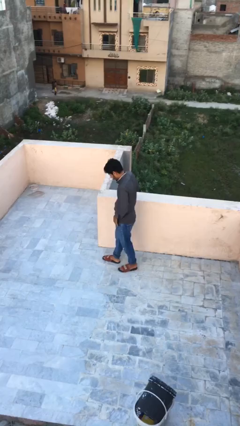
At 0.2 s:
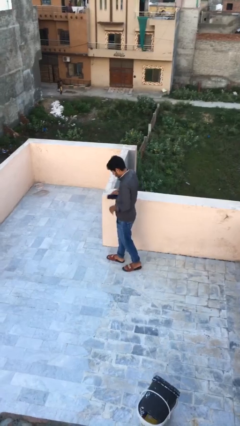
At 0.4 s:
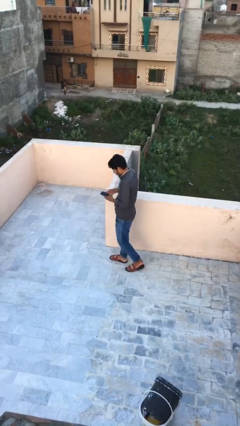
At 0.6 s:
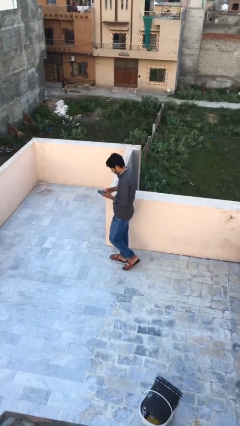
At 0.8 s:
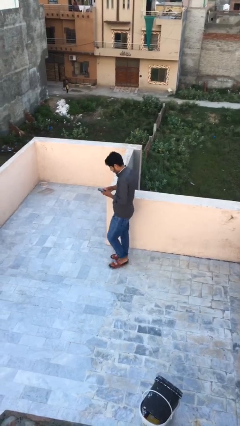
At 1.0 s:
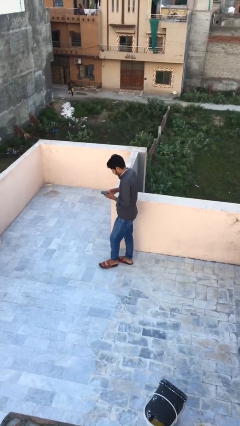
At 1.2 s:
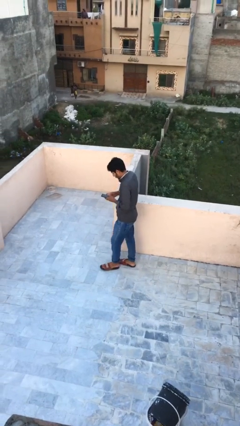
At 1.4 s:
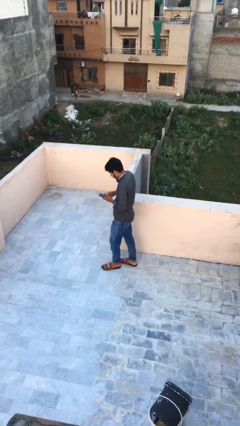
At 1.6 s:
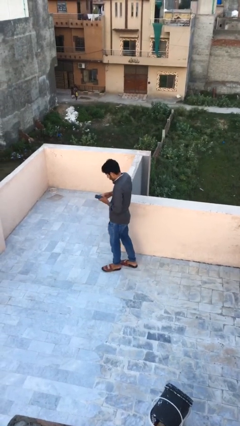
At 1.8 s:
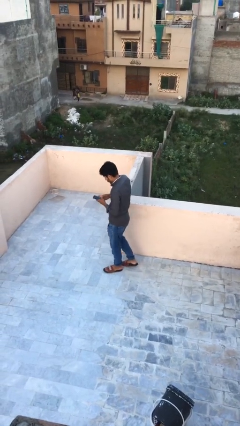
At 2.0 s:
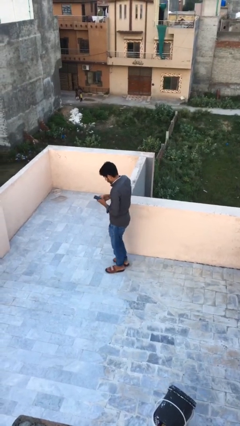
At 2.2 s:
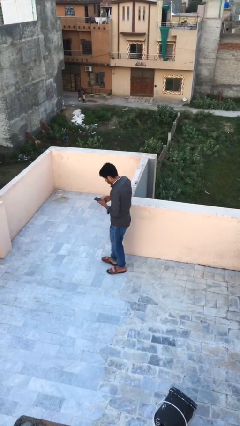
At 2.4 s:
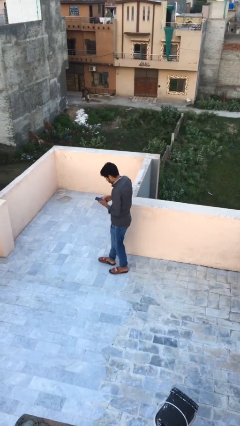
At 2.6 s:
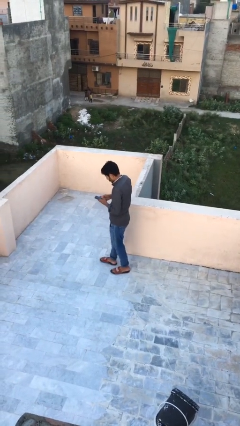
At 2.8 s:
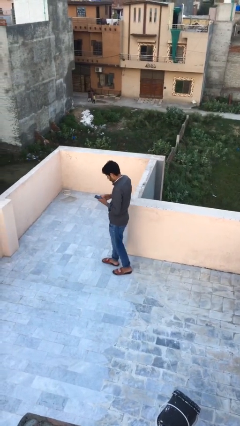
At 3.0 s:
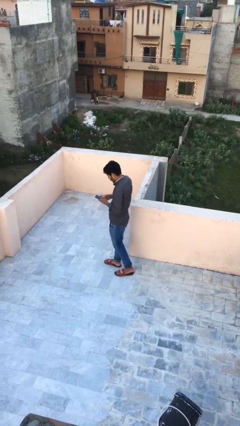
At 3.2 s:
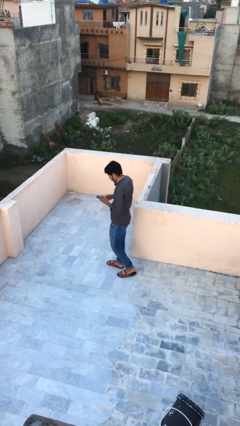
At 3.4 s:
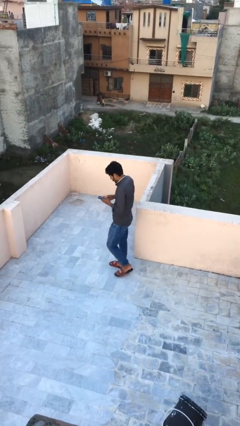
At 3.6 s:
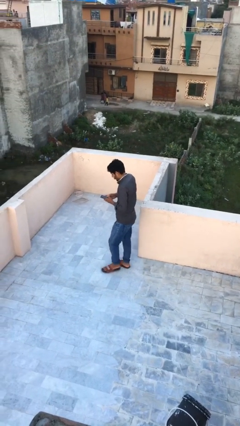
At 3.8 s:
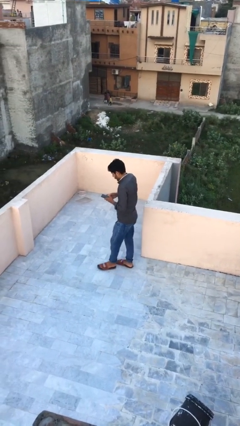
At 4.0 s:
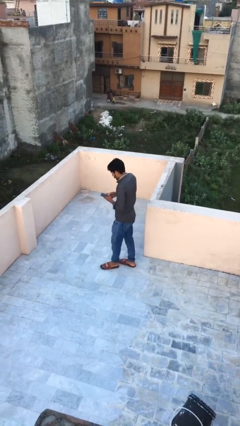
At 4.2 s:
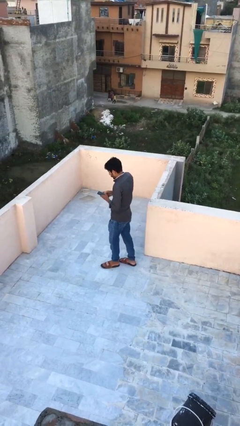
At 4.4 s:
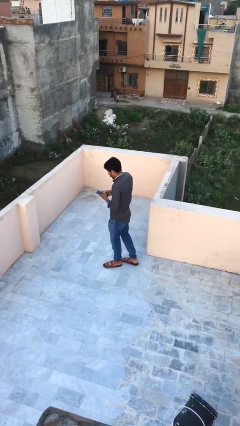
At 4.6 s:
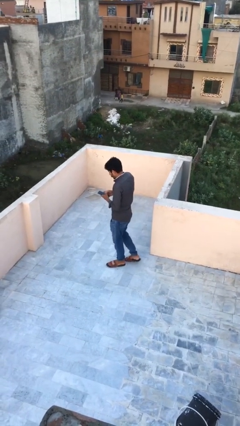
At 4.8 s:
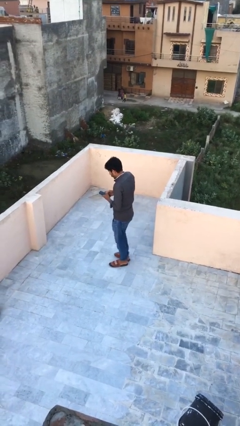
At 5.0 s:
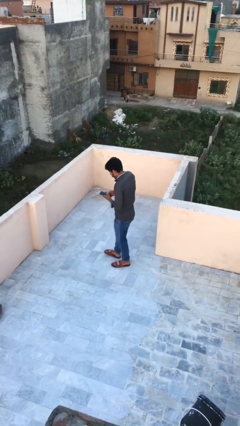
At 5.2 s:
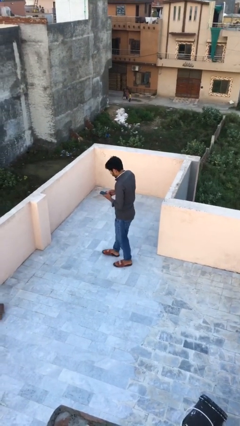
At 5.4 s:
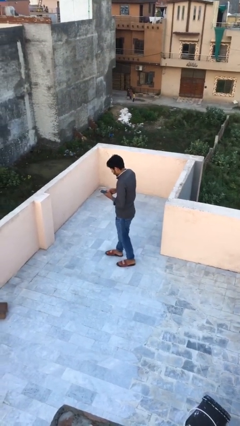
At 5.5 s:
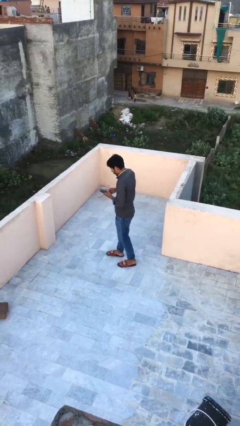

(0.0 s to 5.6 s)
person texts on phone

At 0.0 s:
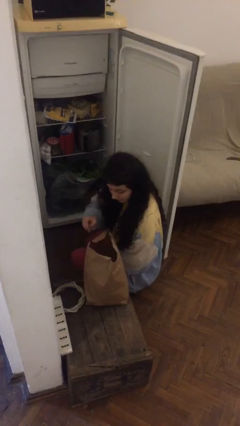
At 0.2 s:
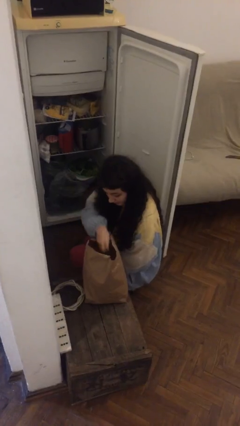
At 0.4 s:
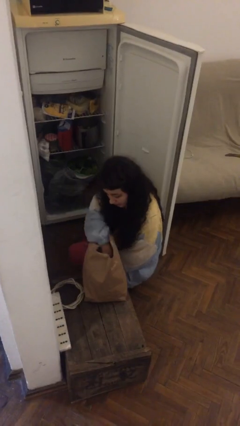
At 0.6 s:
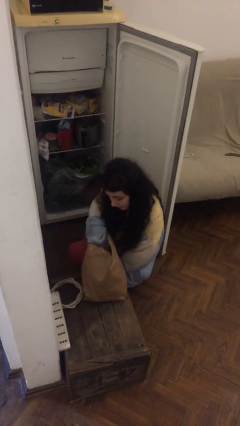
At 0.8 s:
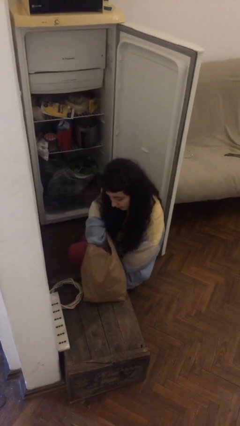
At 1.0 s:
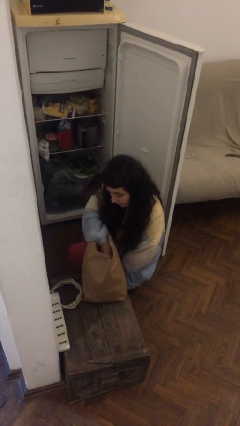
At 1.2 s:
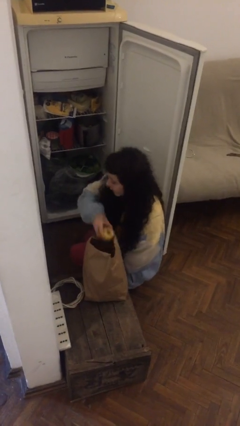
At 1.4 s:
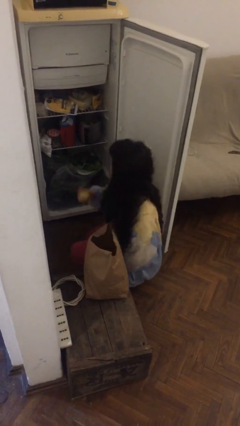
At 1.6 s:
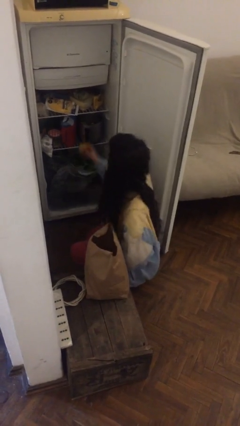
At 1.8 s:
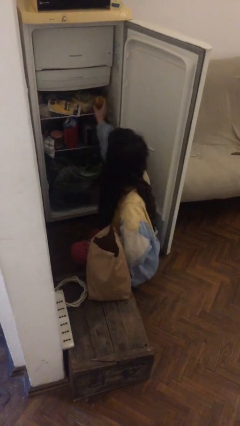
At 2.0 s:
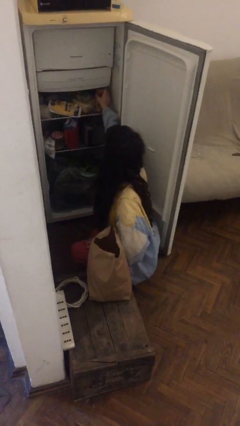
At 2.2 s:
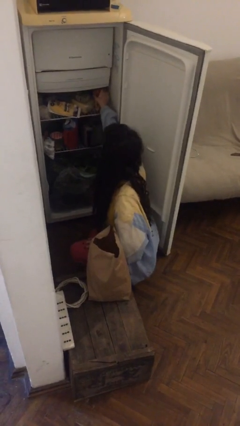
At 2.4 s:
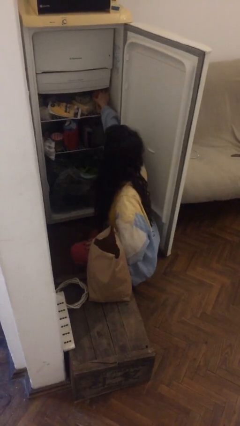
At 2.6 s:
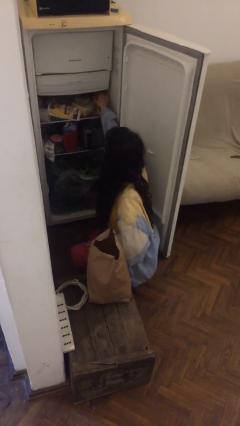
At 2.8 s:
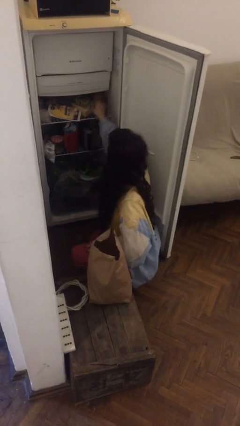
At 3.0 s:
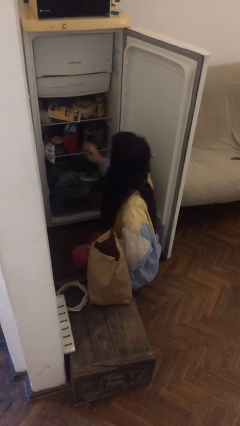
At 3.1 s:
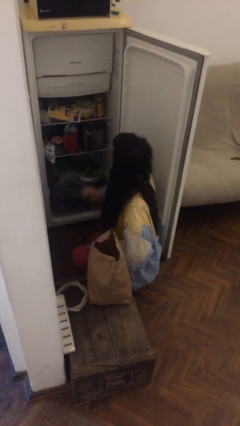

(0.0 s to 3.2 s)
person loads groceries into refrigerator

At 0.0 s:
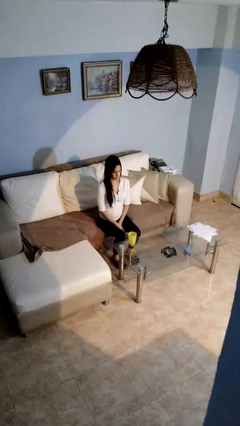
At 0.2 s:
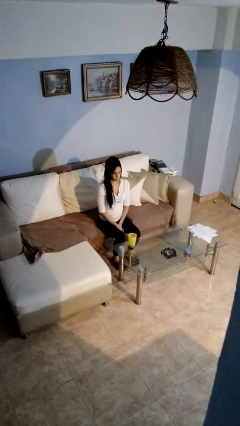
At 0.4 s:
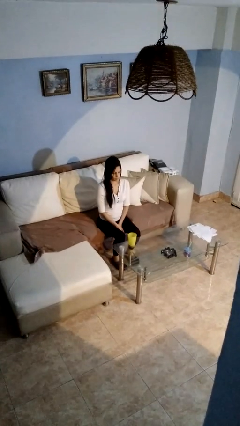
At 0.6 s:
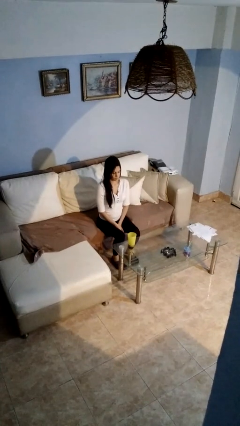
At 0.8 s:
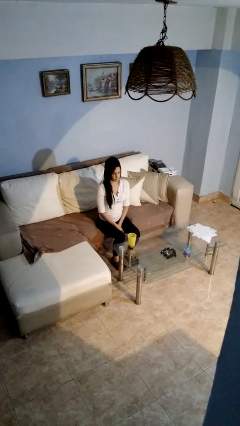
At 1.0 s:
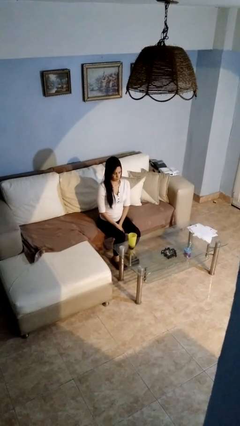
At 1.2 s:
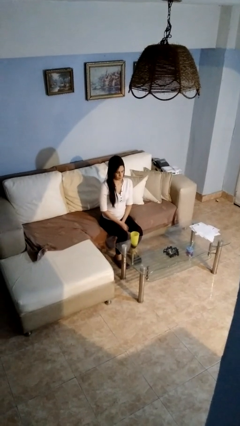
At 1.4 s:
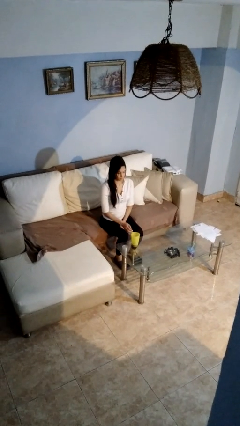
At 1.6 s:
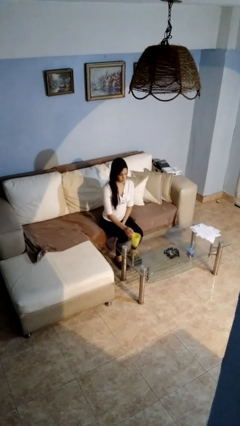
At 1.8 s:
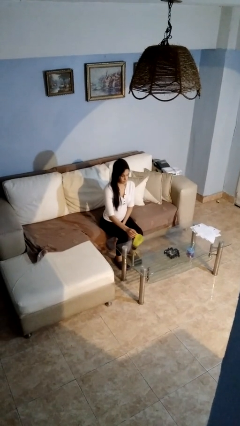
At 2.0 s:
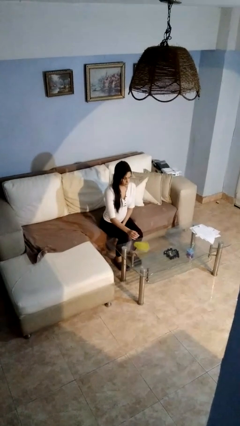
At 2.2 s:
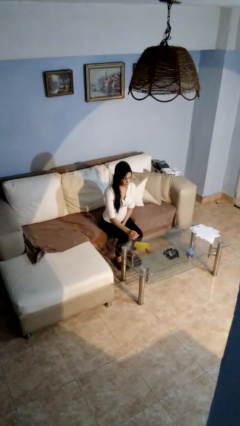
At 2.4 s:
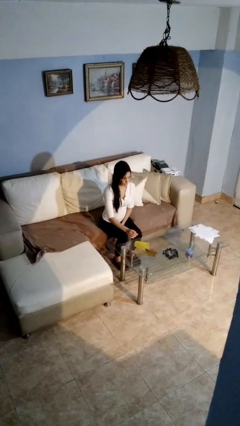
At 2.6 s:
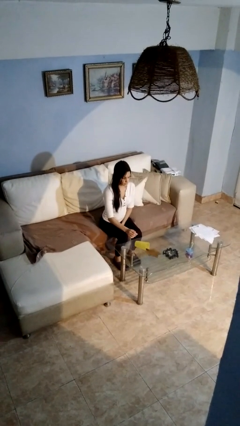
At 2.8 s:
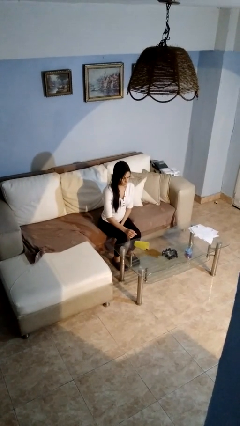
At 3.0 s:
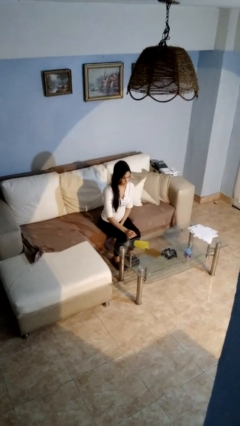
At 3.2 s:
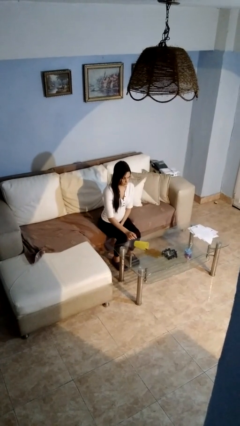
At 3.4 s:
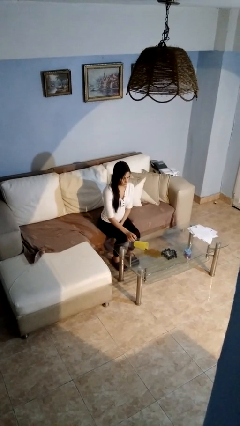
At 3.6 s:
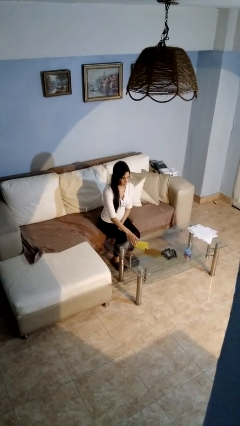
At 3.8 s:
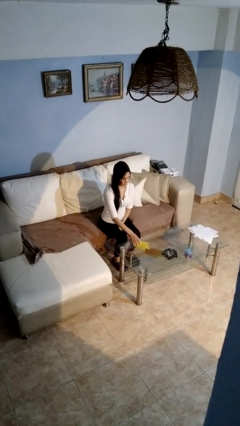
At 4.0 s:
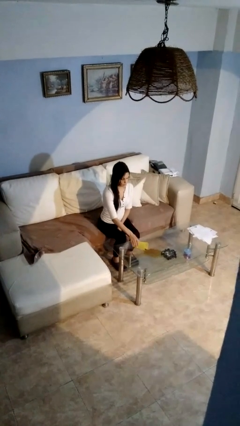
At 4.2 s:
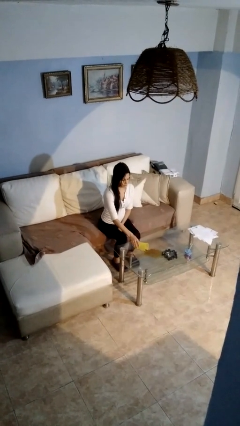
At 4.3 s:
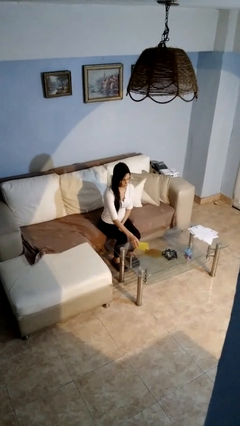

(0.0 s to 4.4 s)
person spills on table

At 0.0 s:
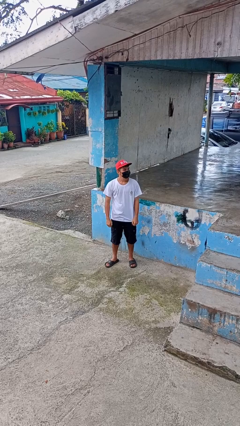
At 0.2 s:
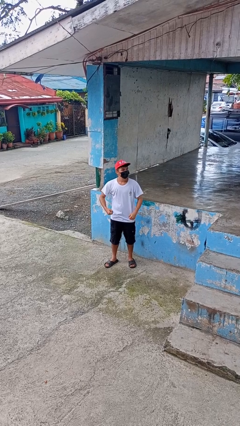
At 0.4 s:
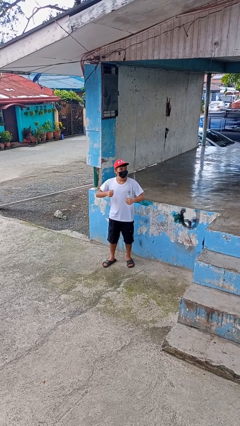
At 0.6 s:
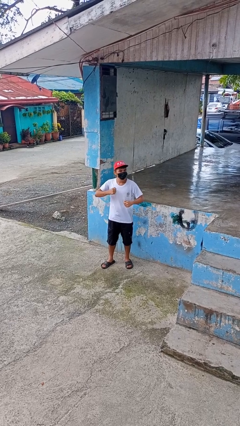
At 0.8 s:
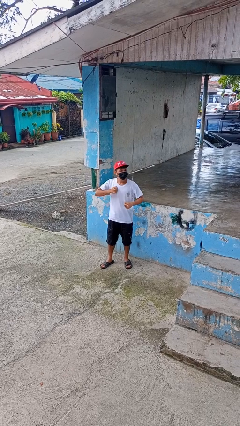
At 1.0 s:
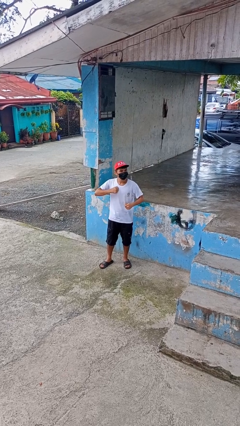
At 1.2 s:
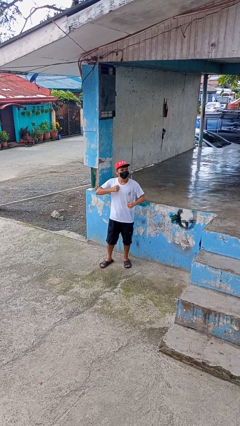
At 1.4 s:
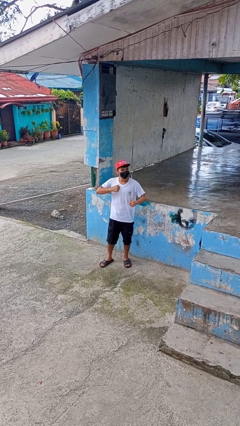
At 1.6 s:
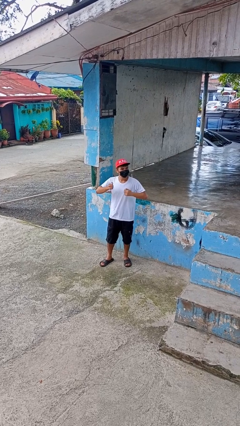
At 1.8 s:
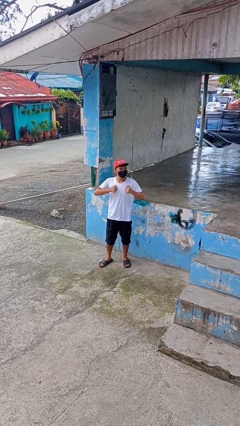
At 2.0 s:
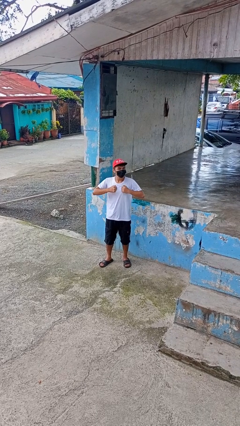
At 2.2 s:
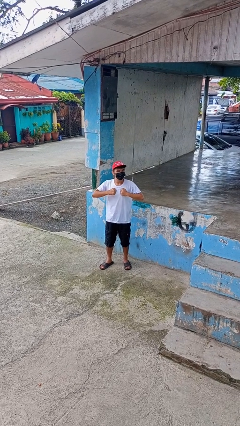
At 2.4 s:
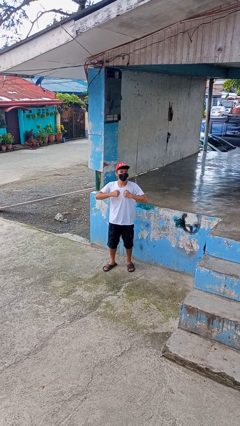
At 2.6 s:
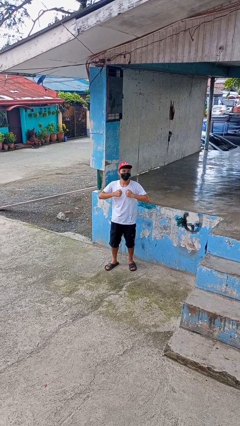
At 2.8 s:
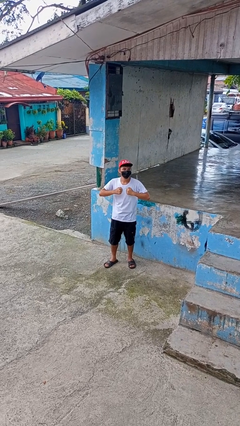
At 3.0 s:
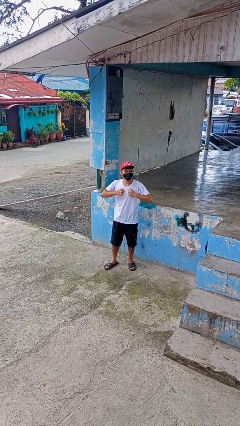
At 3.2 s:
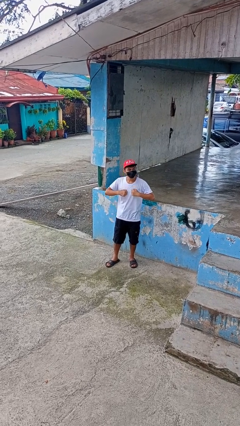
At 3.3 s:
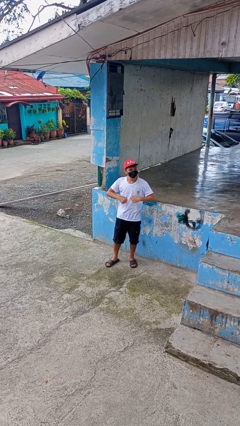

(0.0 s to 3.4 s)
person drums on chest

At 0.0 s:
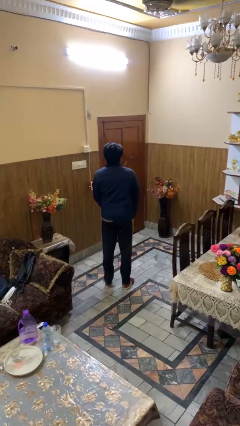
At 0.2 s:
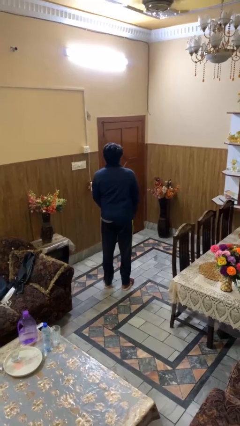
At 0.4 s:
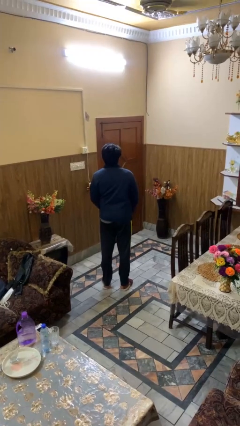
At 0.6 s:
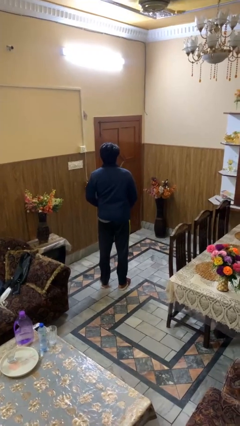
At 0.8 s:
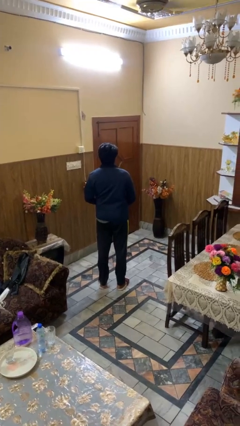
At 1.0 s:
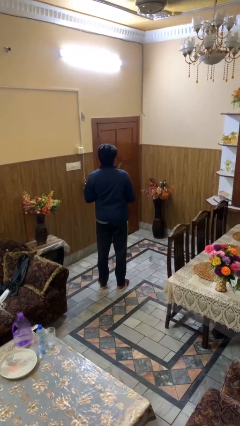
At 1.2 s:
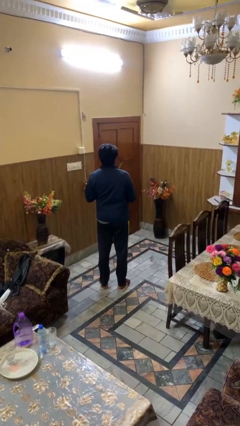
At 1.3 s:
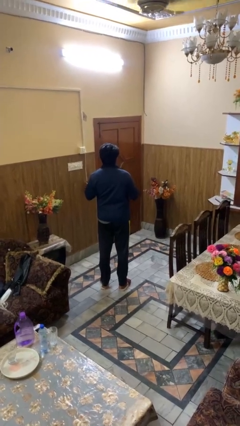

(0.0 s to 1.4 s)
person unzips jacket
